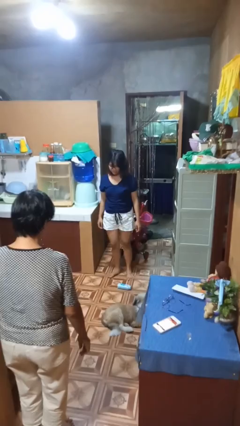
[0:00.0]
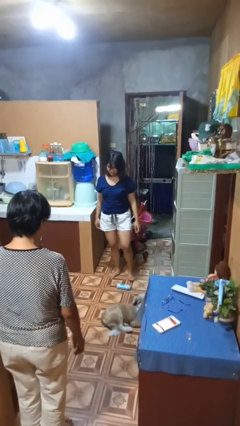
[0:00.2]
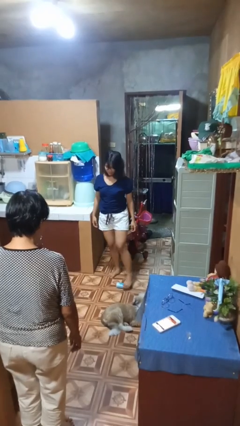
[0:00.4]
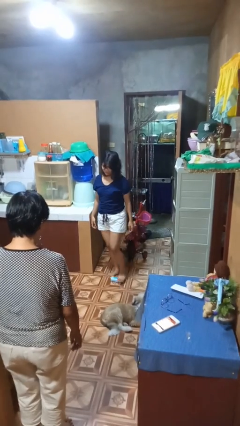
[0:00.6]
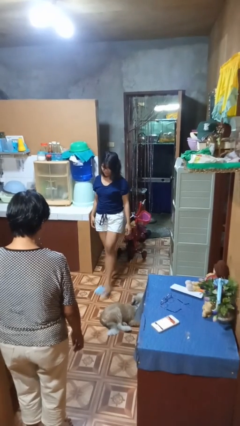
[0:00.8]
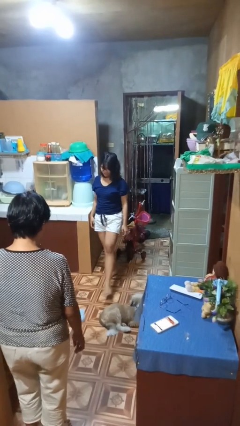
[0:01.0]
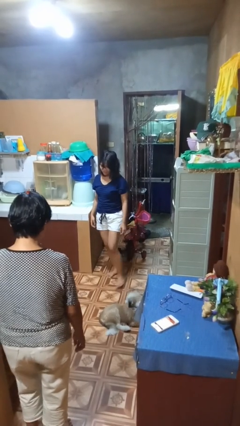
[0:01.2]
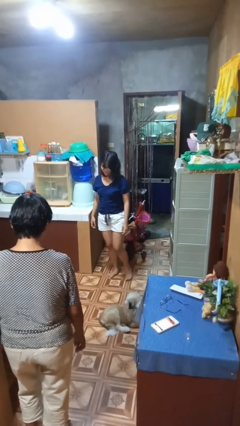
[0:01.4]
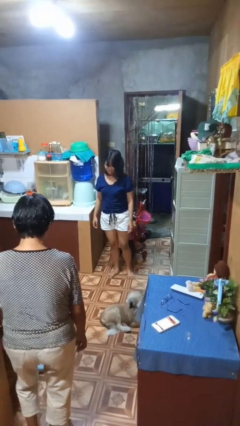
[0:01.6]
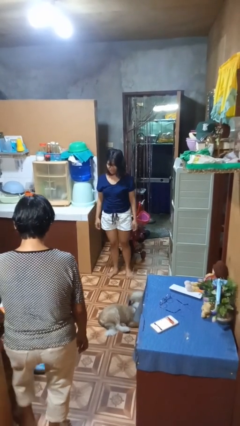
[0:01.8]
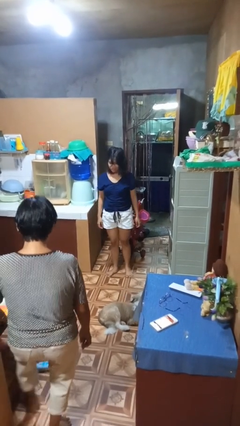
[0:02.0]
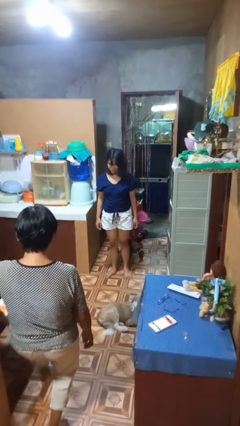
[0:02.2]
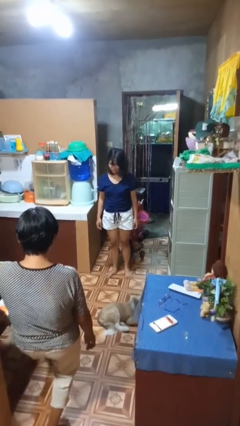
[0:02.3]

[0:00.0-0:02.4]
person kicks object to person

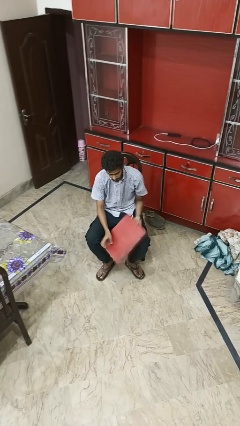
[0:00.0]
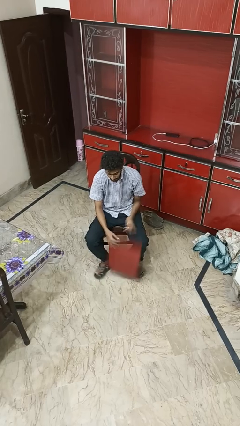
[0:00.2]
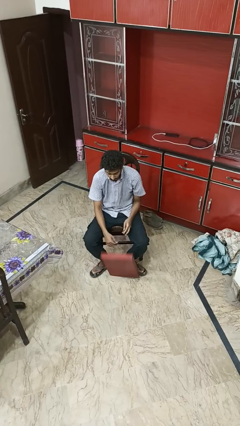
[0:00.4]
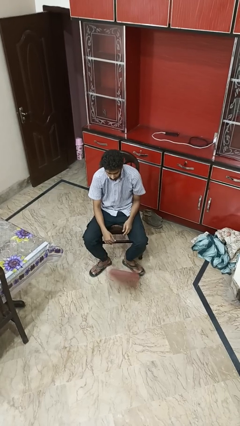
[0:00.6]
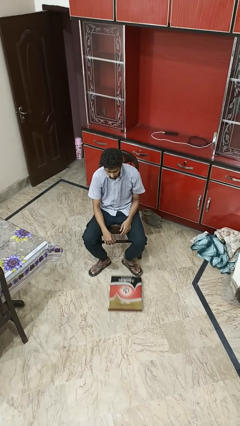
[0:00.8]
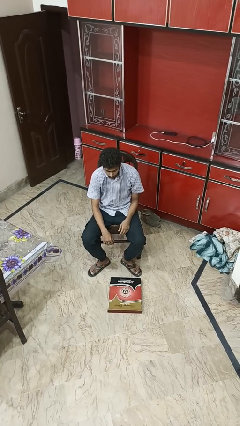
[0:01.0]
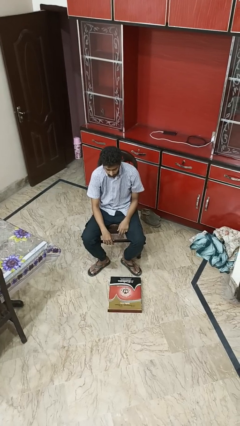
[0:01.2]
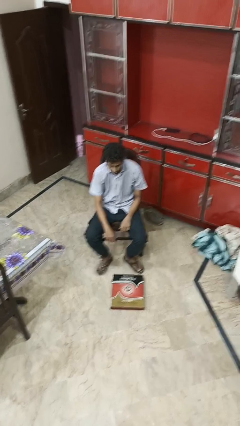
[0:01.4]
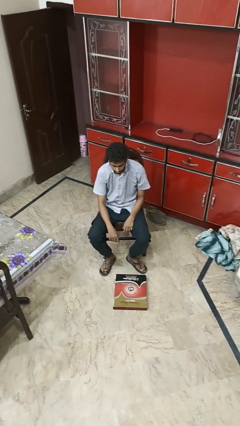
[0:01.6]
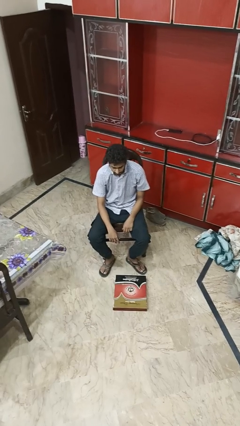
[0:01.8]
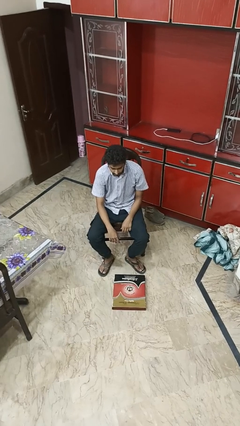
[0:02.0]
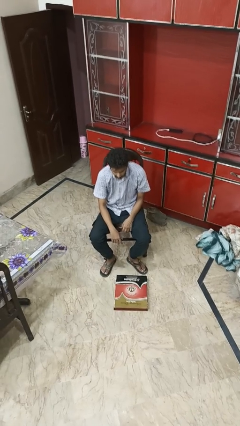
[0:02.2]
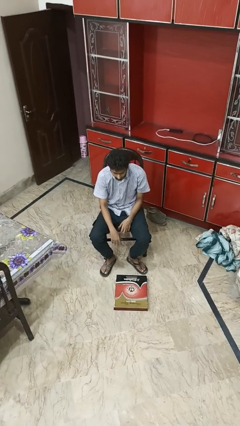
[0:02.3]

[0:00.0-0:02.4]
person drops object

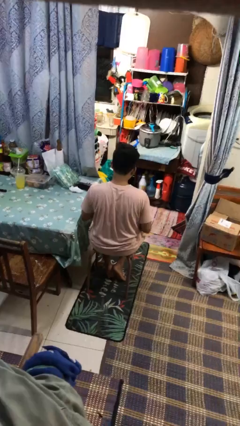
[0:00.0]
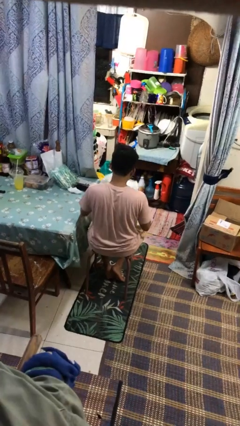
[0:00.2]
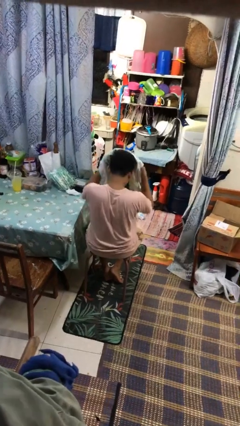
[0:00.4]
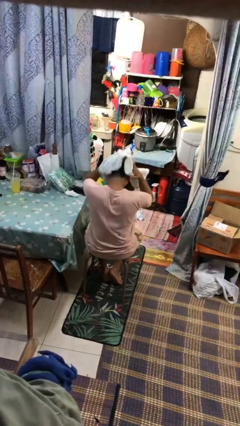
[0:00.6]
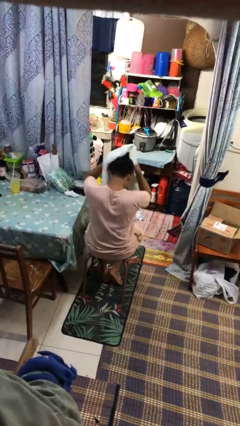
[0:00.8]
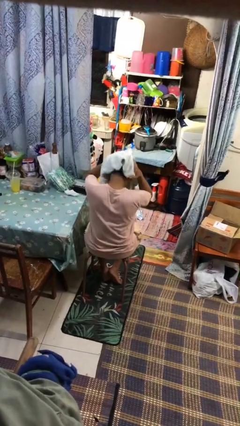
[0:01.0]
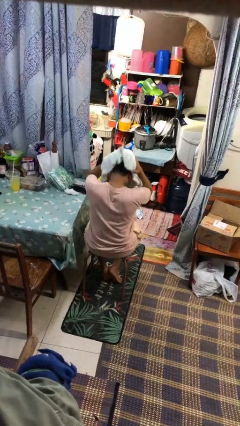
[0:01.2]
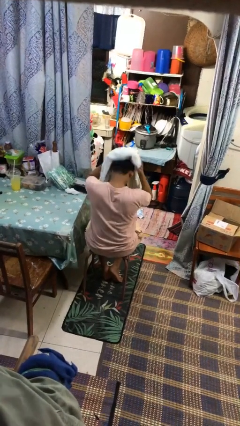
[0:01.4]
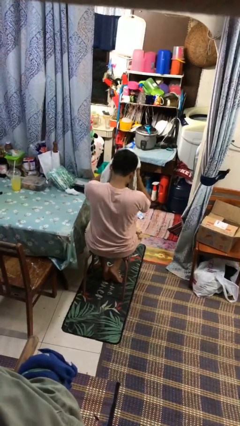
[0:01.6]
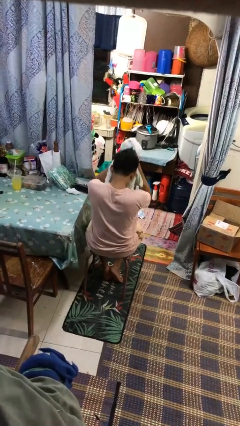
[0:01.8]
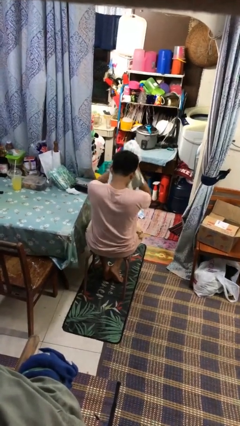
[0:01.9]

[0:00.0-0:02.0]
person dries hair with towel

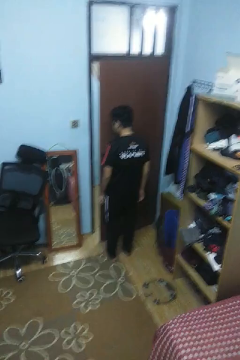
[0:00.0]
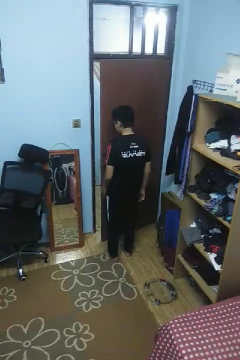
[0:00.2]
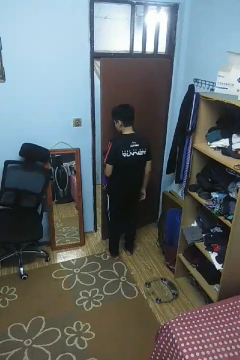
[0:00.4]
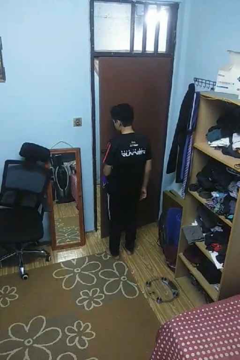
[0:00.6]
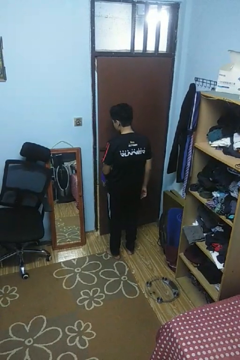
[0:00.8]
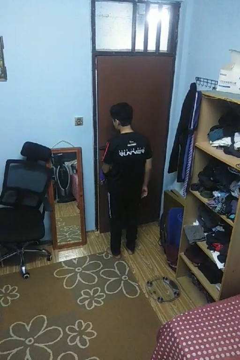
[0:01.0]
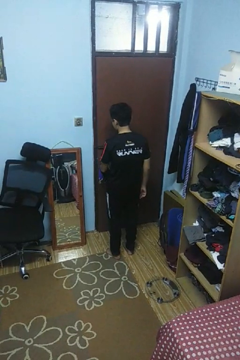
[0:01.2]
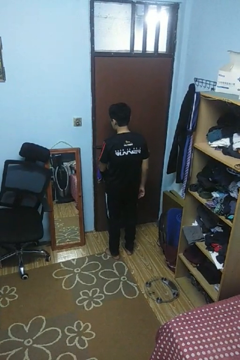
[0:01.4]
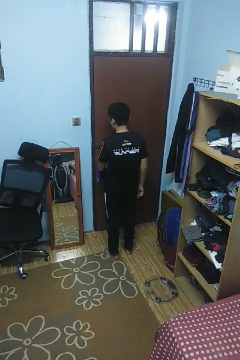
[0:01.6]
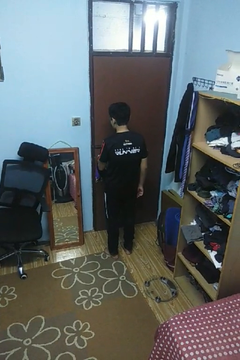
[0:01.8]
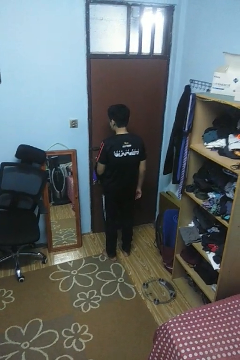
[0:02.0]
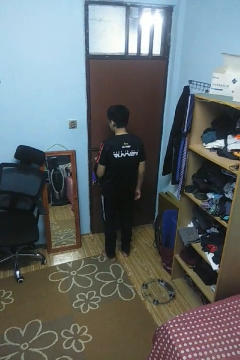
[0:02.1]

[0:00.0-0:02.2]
person closes facility door

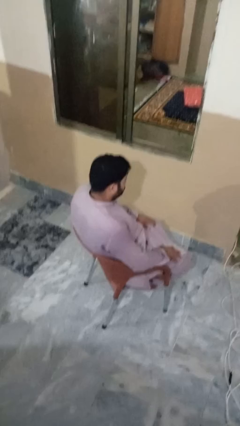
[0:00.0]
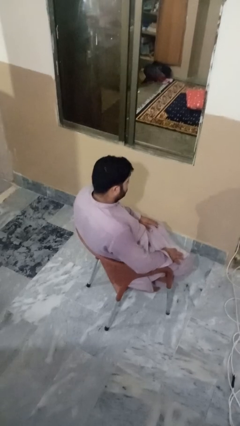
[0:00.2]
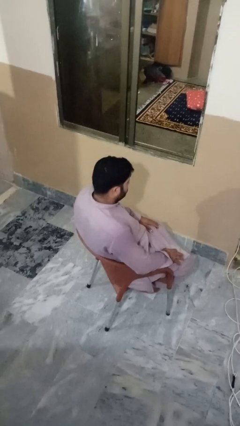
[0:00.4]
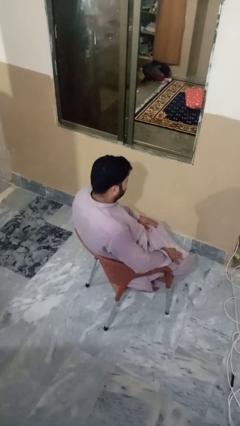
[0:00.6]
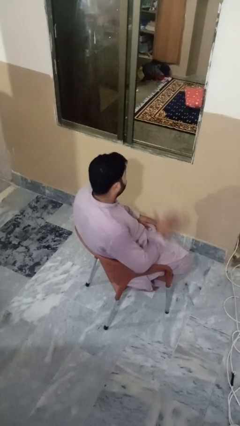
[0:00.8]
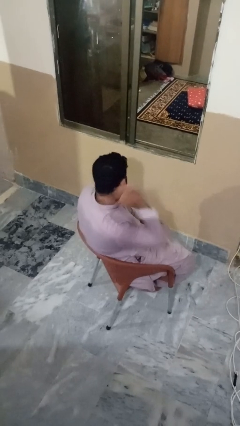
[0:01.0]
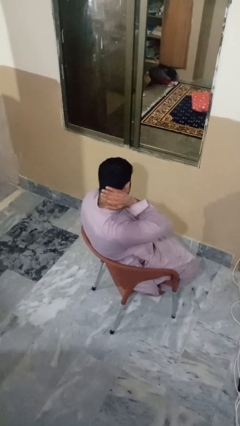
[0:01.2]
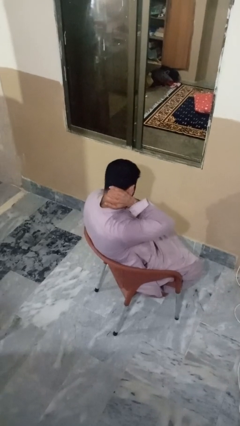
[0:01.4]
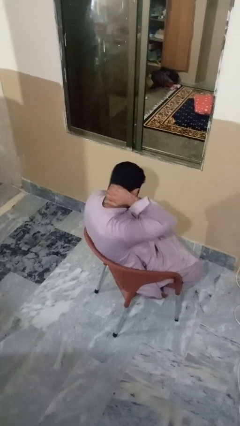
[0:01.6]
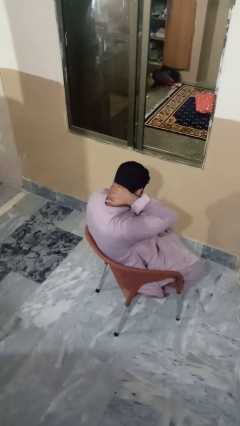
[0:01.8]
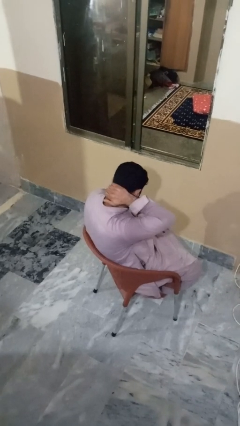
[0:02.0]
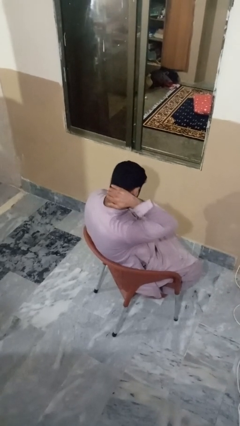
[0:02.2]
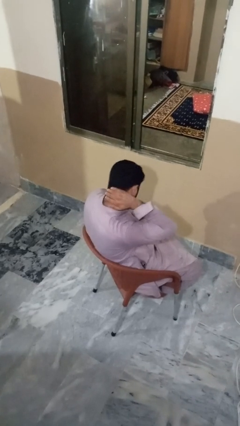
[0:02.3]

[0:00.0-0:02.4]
person rubs neck

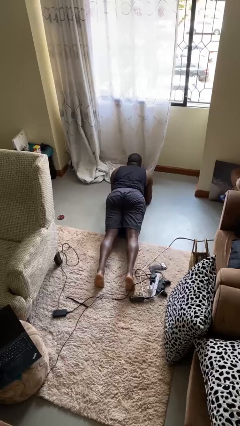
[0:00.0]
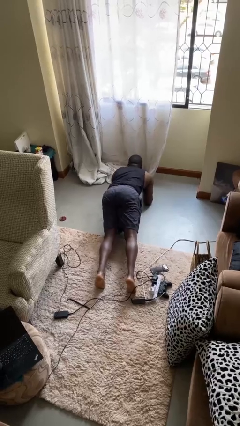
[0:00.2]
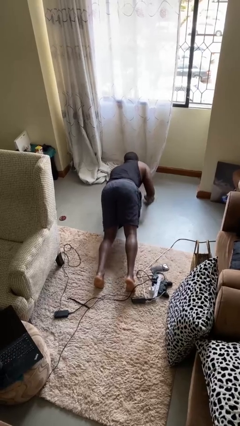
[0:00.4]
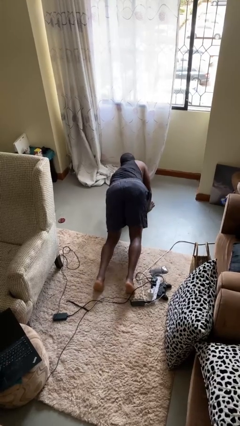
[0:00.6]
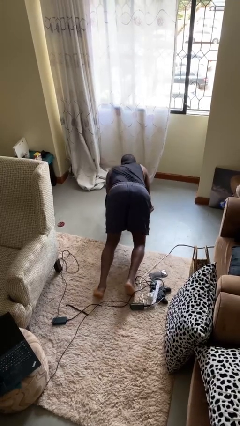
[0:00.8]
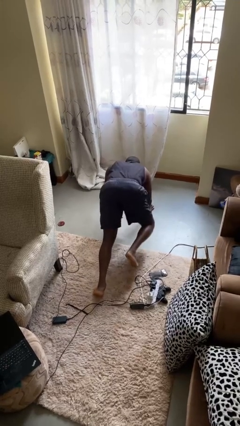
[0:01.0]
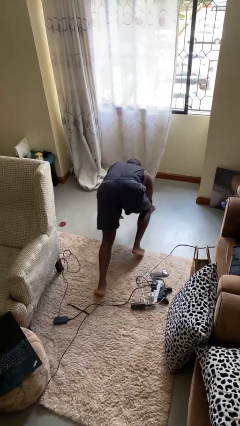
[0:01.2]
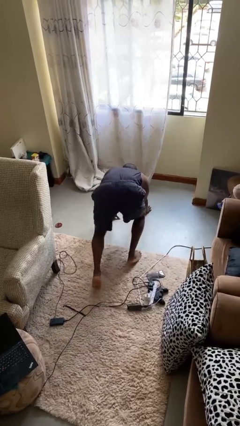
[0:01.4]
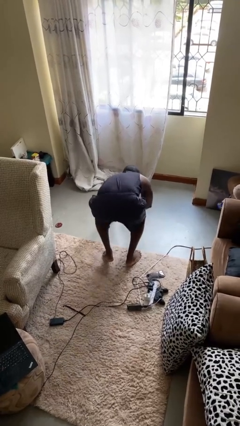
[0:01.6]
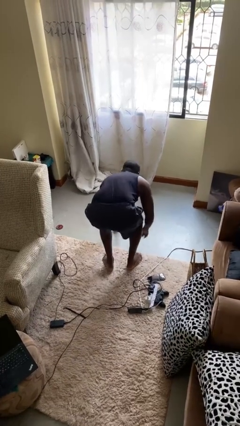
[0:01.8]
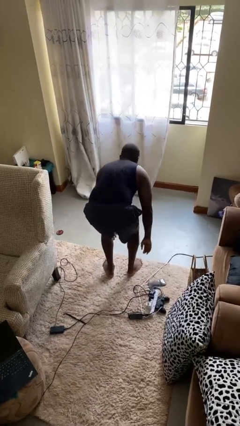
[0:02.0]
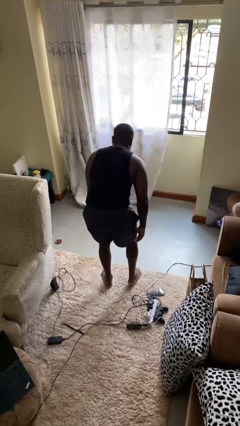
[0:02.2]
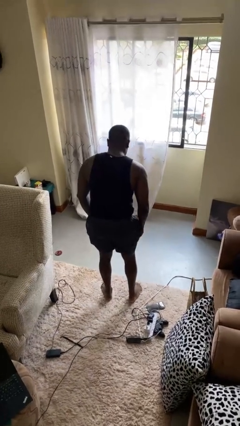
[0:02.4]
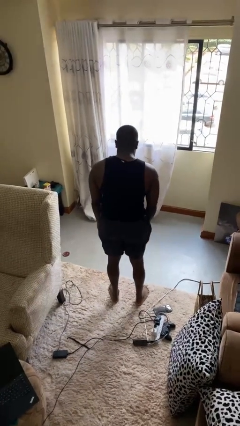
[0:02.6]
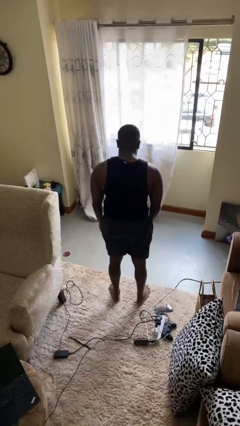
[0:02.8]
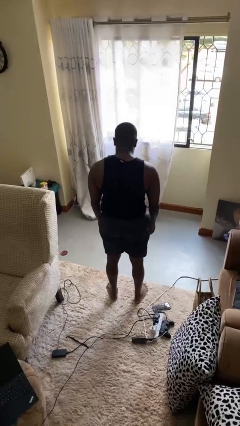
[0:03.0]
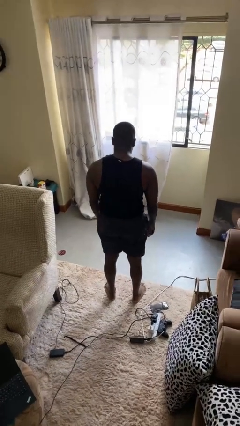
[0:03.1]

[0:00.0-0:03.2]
person stands up from floor

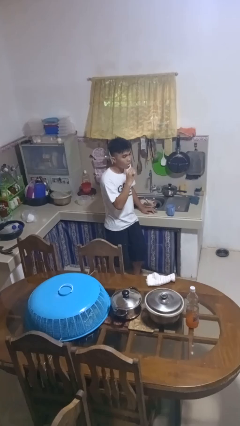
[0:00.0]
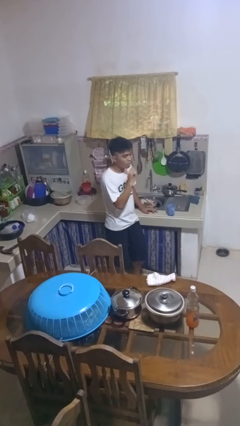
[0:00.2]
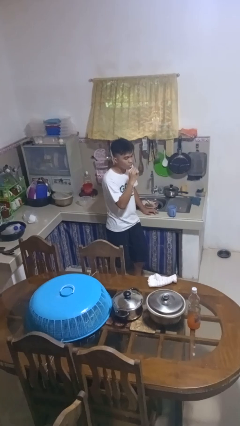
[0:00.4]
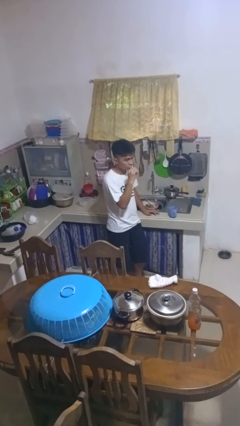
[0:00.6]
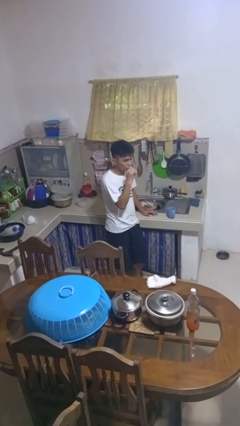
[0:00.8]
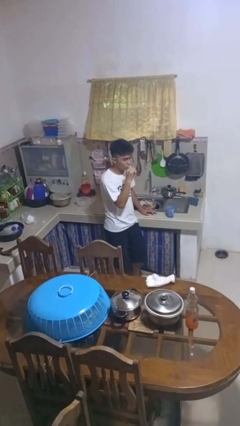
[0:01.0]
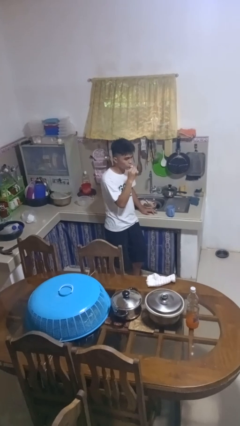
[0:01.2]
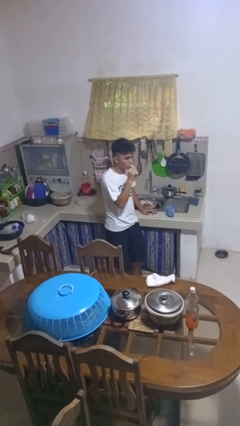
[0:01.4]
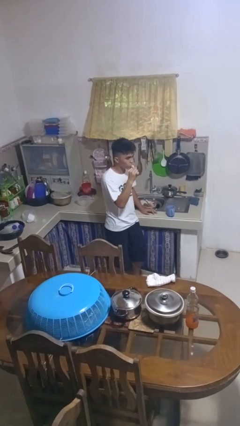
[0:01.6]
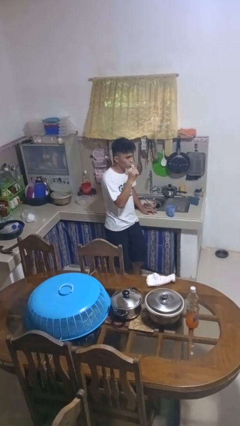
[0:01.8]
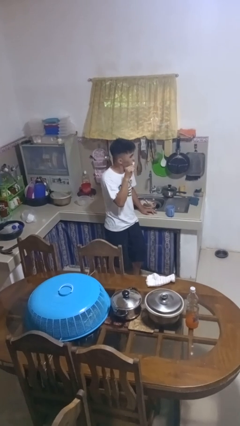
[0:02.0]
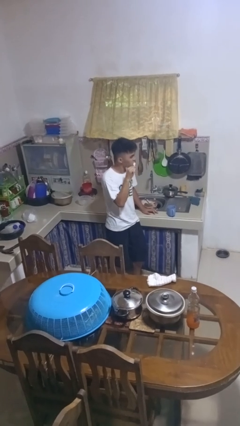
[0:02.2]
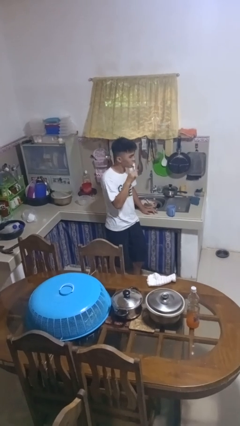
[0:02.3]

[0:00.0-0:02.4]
person brushes teeth

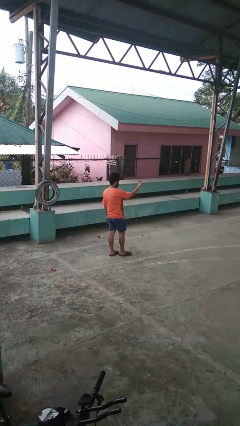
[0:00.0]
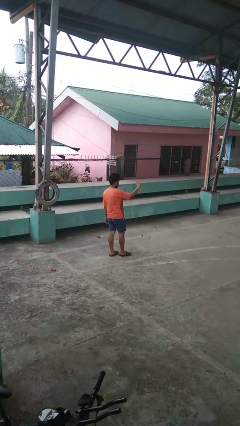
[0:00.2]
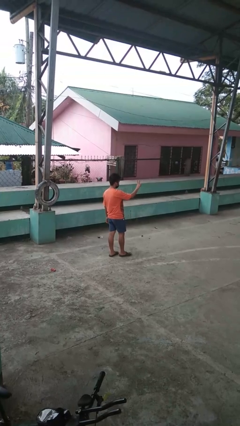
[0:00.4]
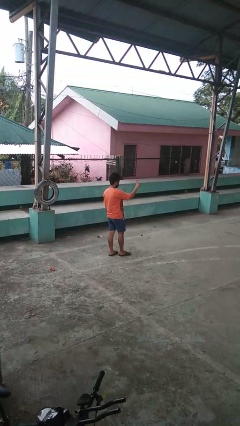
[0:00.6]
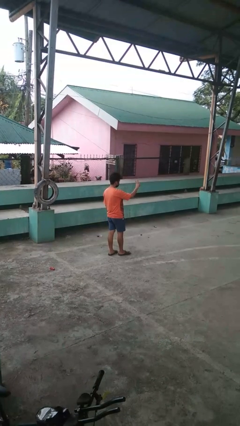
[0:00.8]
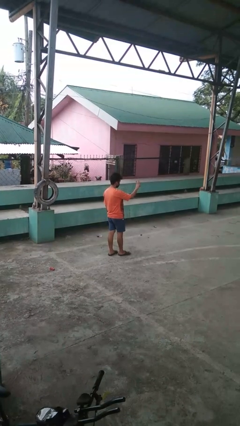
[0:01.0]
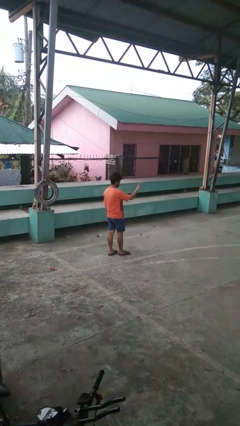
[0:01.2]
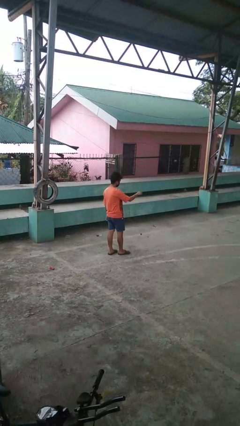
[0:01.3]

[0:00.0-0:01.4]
person gestures peace
